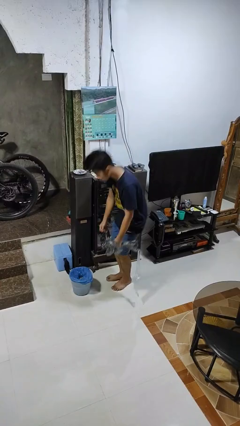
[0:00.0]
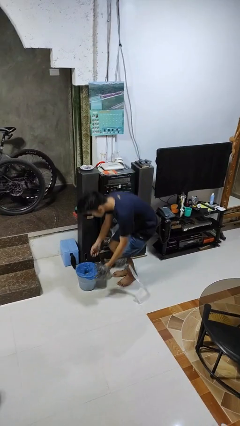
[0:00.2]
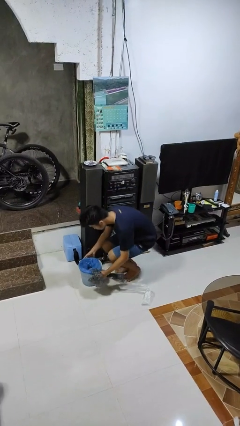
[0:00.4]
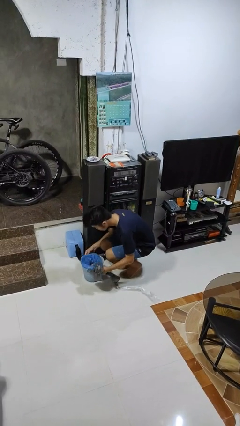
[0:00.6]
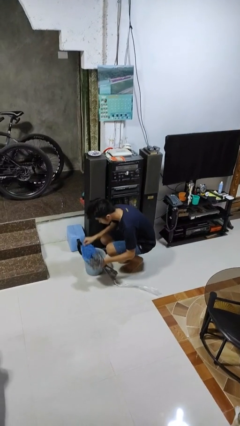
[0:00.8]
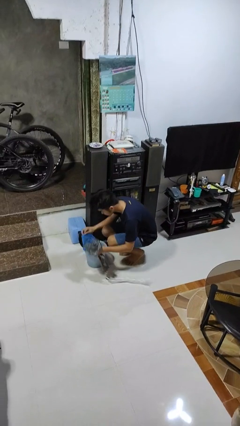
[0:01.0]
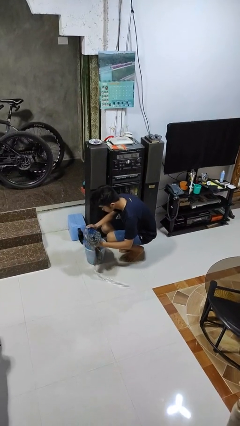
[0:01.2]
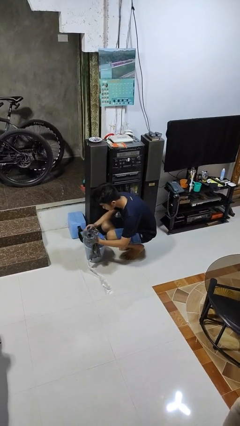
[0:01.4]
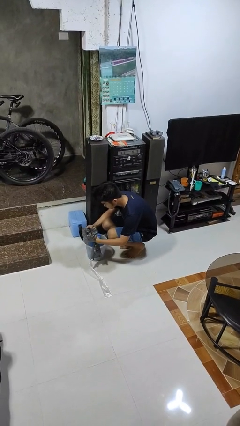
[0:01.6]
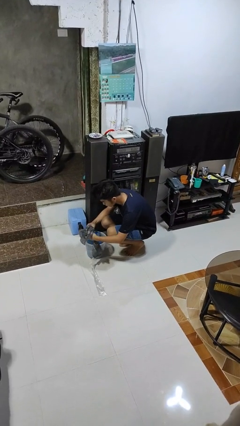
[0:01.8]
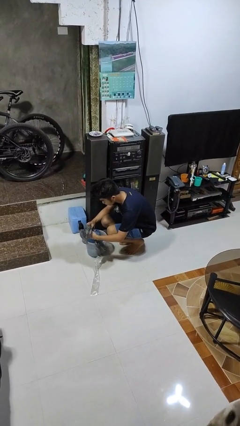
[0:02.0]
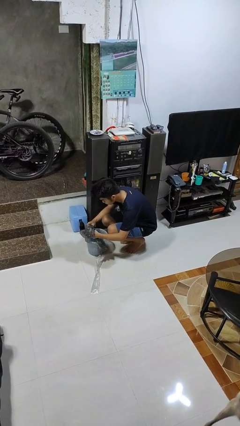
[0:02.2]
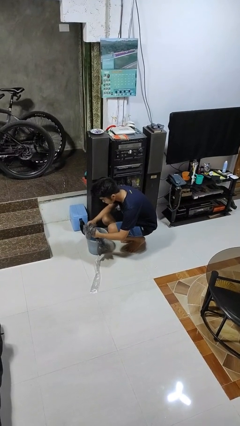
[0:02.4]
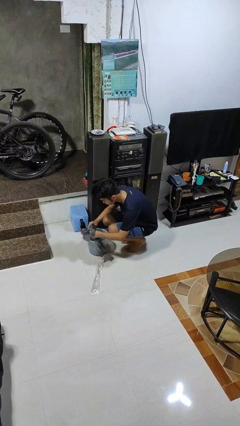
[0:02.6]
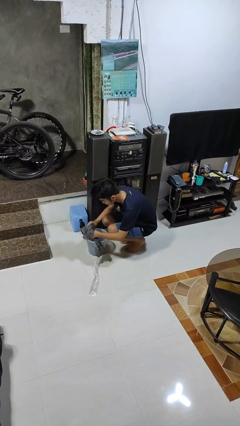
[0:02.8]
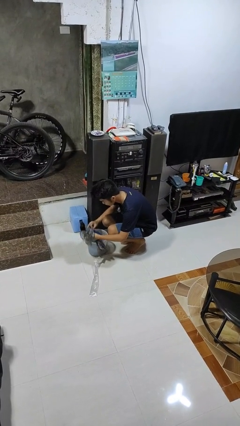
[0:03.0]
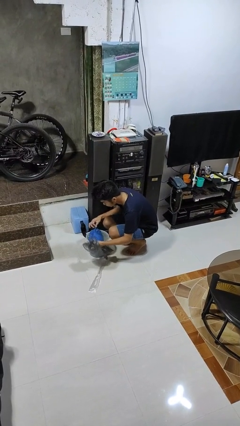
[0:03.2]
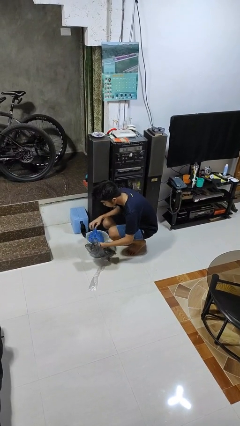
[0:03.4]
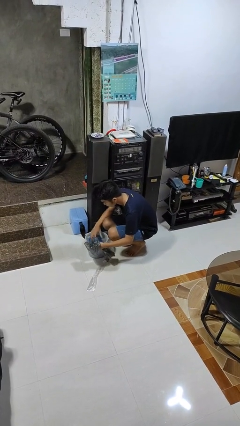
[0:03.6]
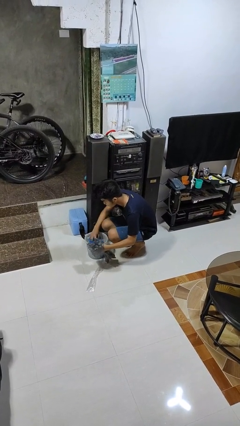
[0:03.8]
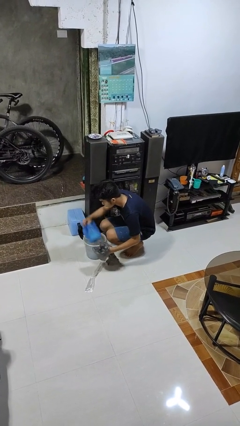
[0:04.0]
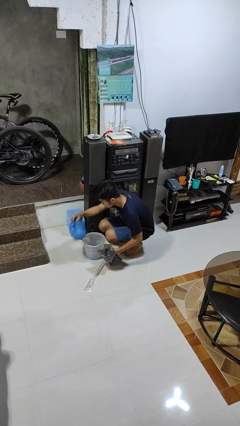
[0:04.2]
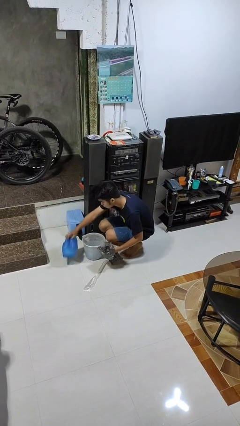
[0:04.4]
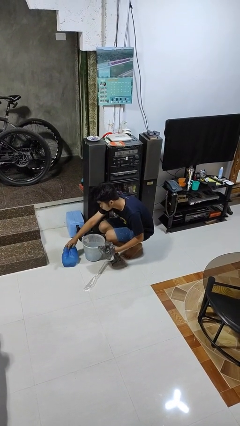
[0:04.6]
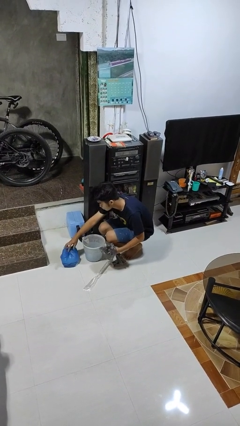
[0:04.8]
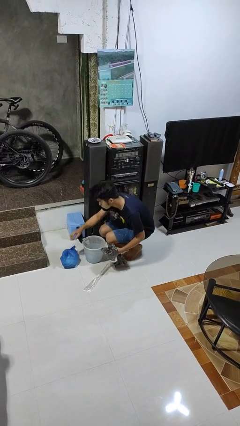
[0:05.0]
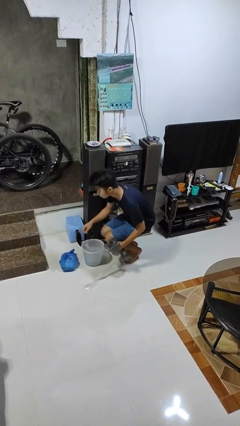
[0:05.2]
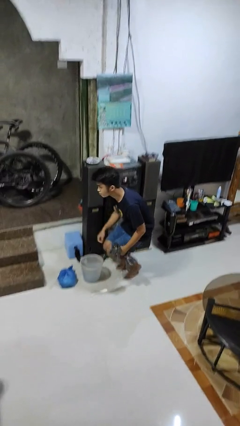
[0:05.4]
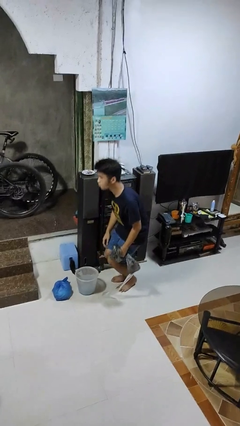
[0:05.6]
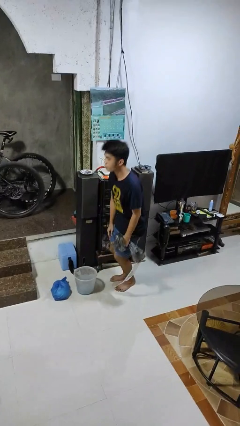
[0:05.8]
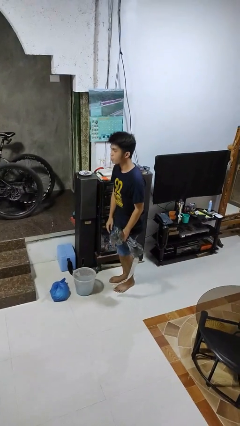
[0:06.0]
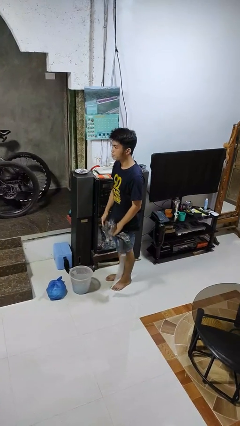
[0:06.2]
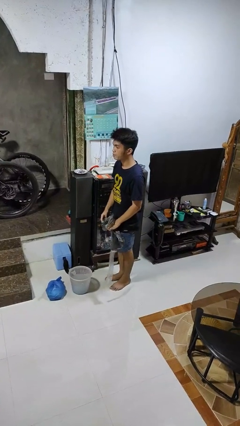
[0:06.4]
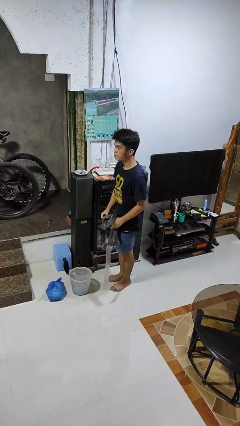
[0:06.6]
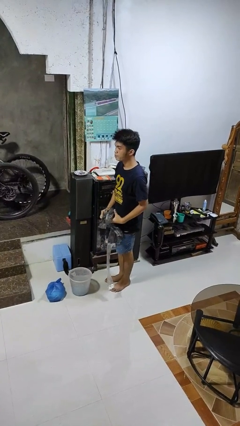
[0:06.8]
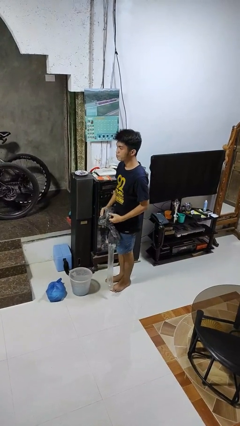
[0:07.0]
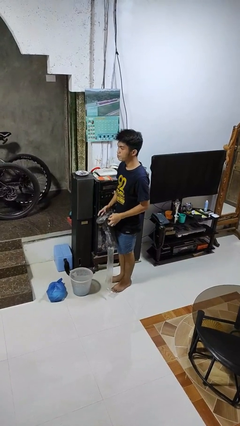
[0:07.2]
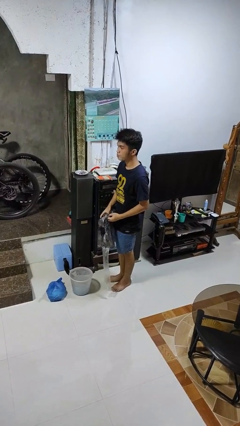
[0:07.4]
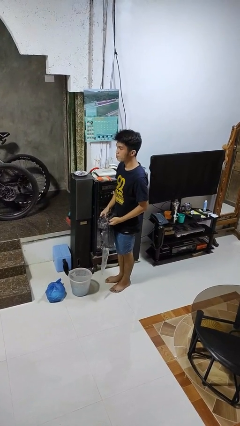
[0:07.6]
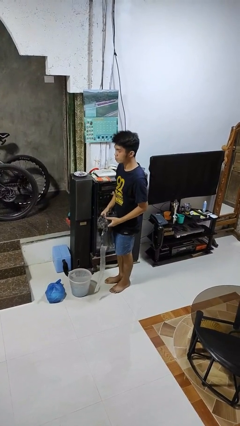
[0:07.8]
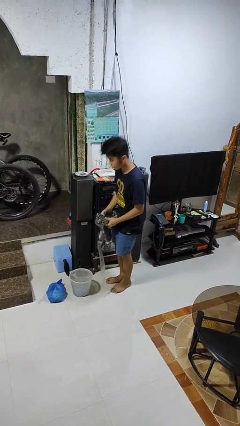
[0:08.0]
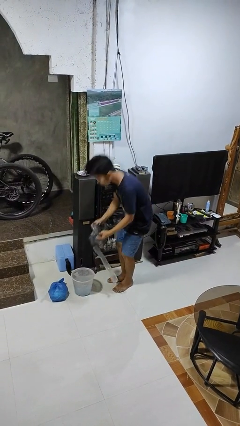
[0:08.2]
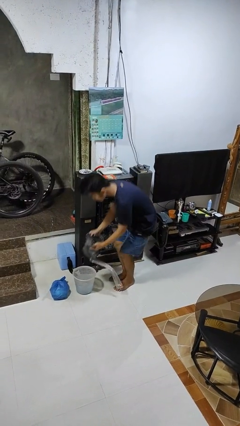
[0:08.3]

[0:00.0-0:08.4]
person removes trashbag from trashcan

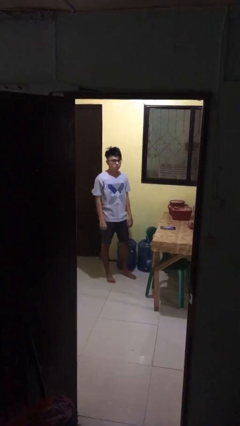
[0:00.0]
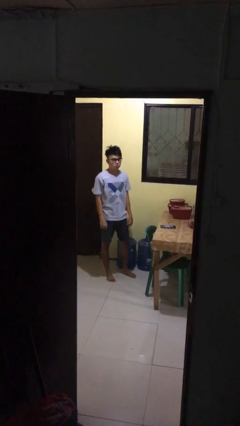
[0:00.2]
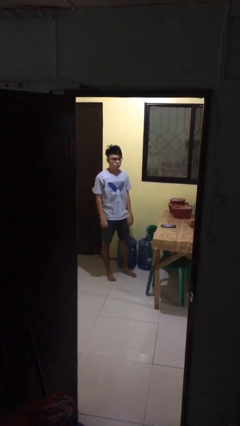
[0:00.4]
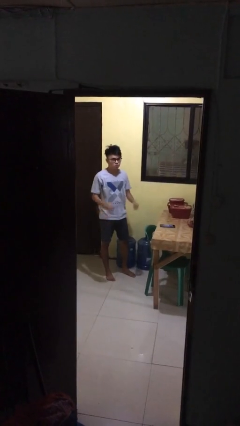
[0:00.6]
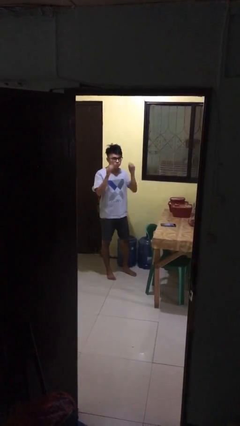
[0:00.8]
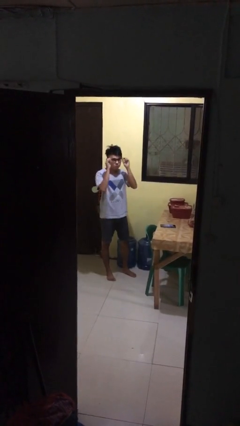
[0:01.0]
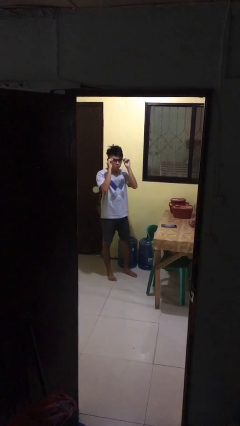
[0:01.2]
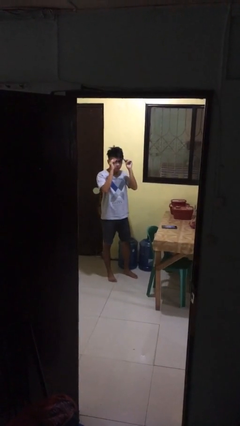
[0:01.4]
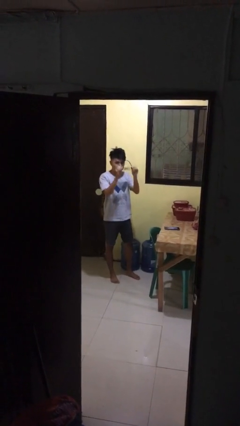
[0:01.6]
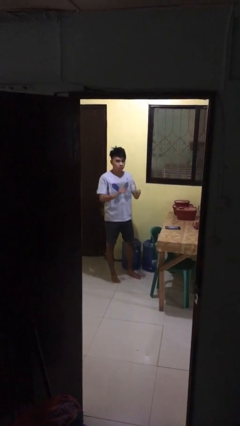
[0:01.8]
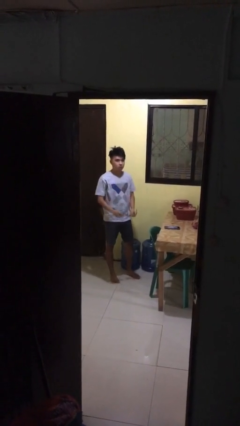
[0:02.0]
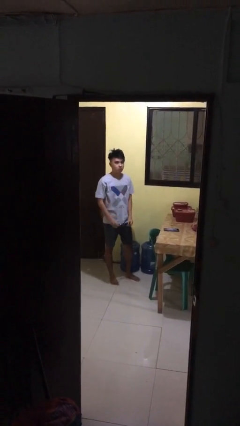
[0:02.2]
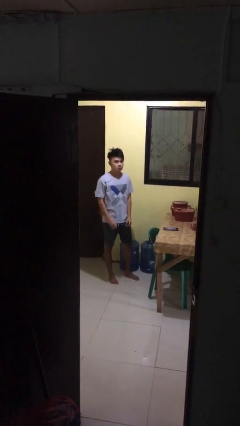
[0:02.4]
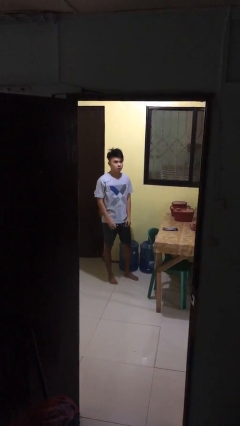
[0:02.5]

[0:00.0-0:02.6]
person takes off glasses

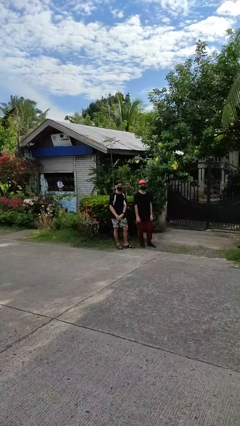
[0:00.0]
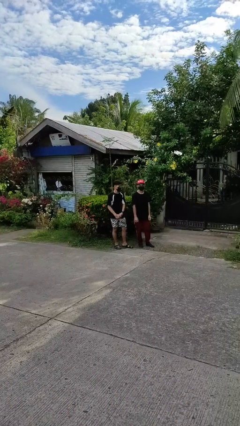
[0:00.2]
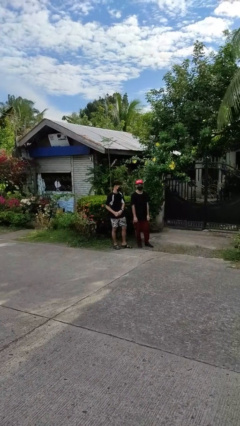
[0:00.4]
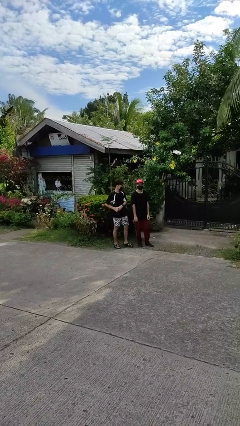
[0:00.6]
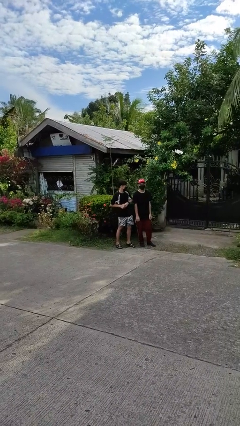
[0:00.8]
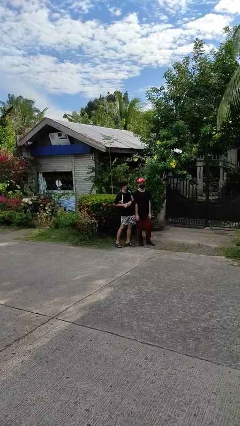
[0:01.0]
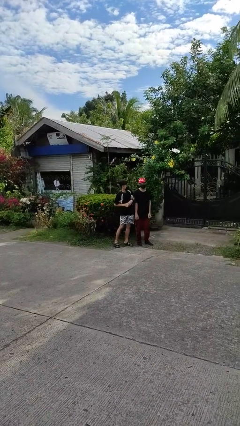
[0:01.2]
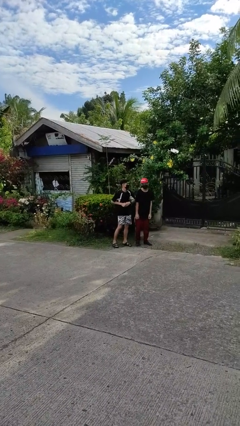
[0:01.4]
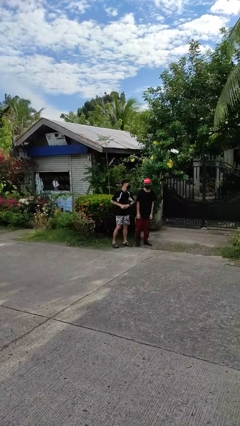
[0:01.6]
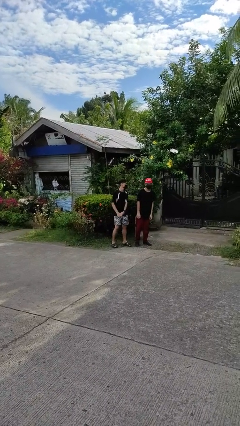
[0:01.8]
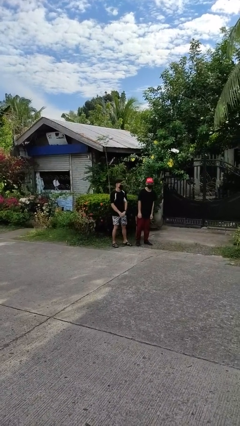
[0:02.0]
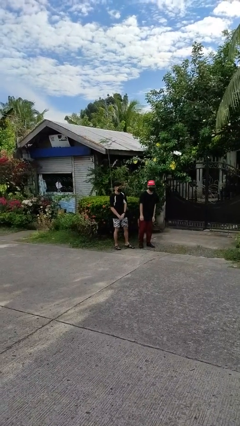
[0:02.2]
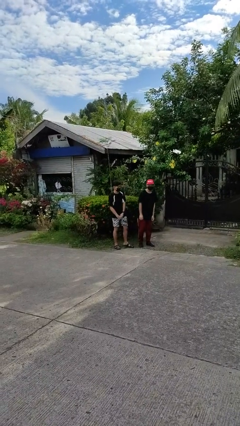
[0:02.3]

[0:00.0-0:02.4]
person nudges person with elbow

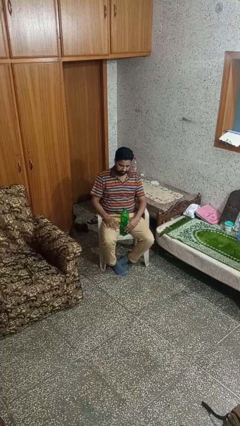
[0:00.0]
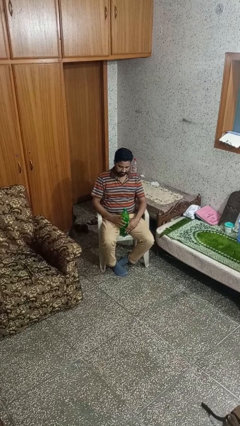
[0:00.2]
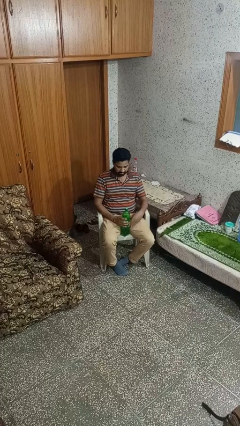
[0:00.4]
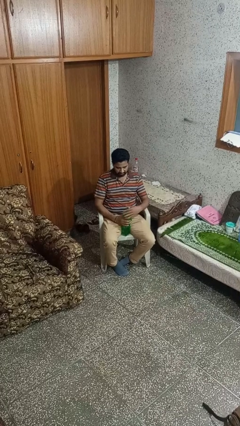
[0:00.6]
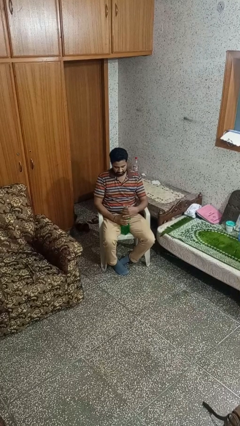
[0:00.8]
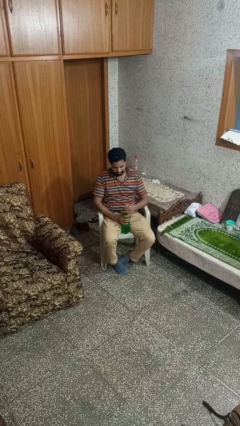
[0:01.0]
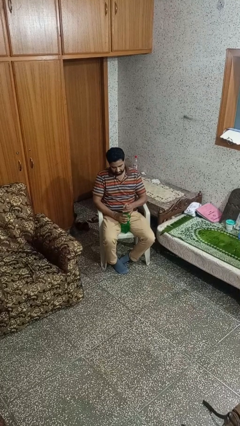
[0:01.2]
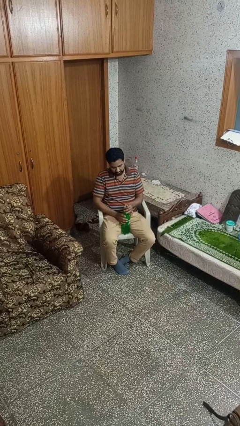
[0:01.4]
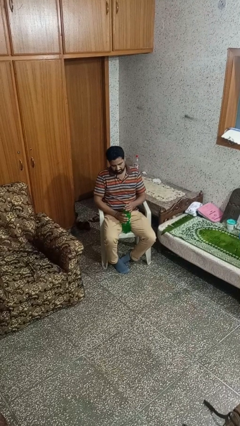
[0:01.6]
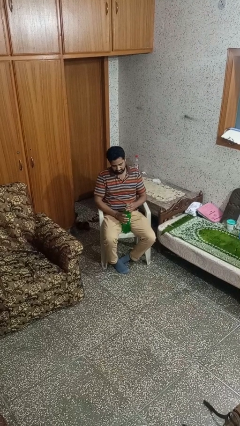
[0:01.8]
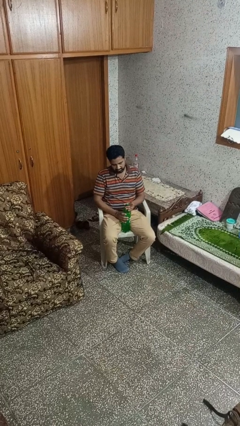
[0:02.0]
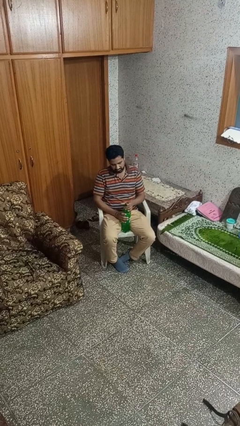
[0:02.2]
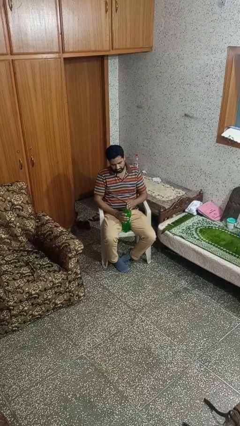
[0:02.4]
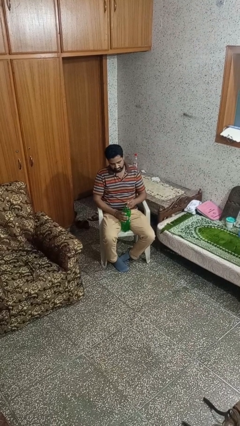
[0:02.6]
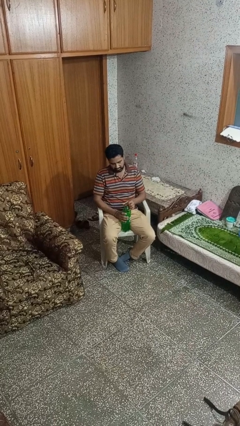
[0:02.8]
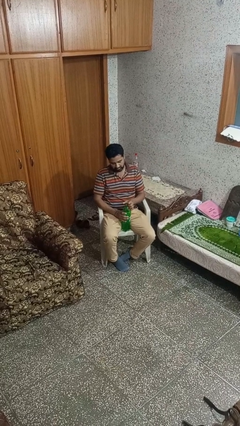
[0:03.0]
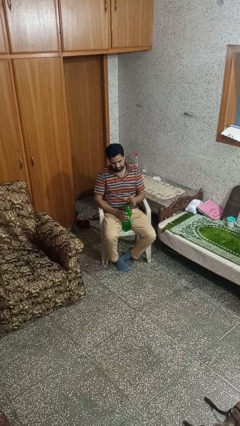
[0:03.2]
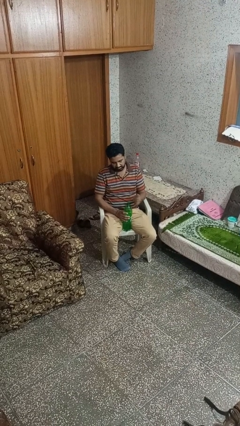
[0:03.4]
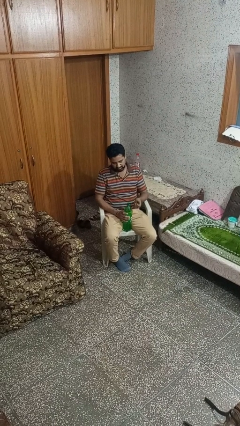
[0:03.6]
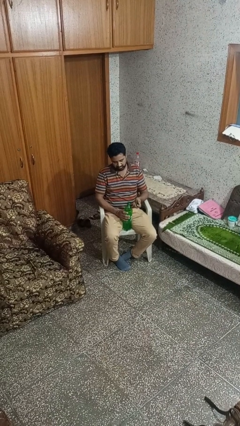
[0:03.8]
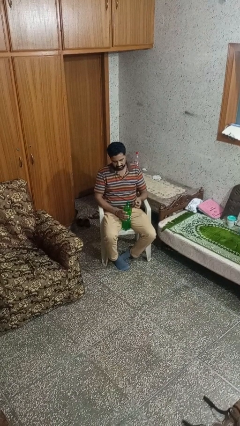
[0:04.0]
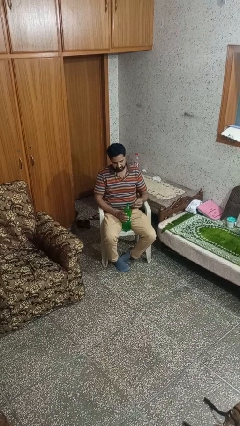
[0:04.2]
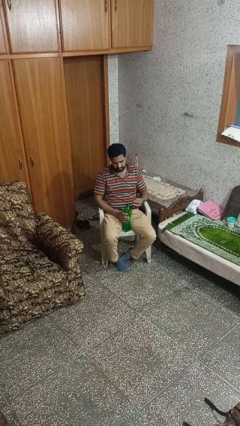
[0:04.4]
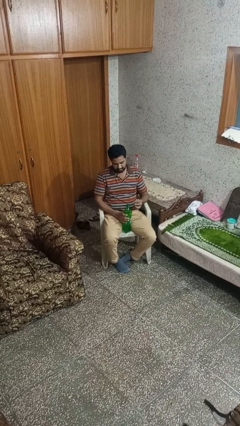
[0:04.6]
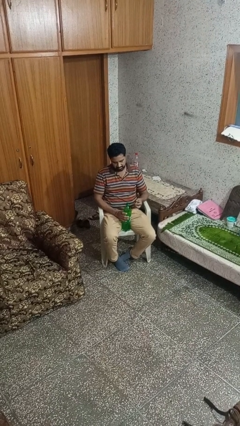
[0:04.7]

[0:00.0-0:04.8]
person unscrews lid from bottle
